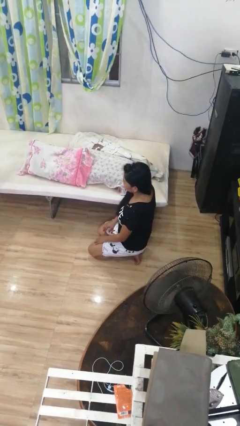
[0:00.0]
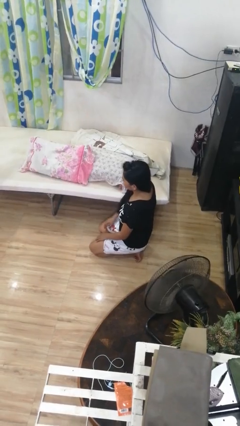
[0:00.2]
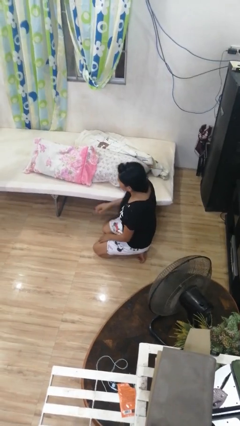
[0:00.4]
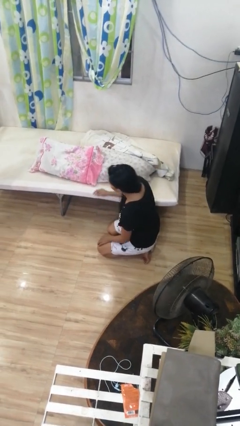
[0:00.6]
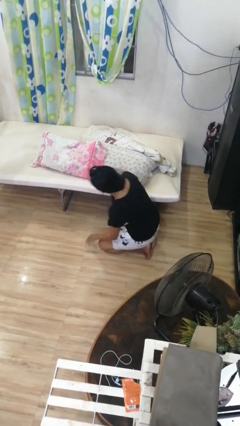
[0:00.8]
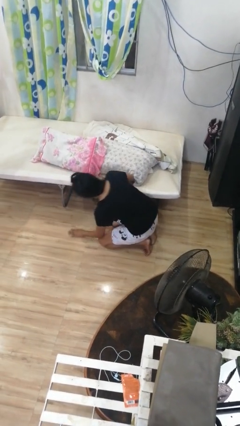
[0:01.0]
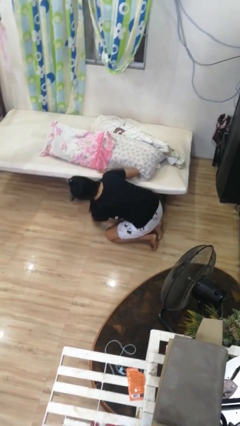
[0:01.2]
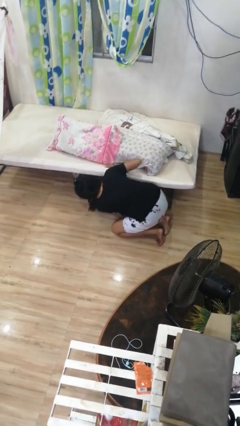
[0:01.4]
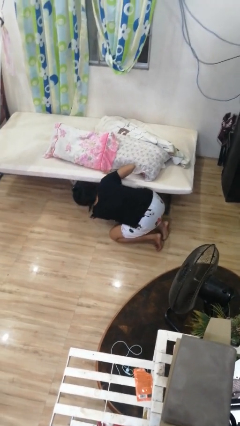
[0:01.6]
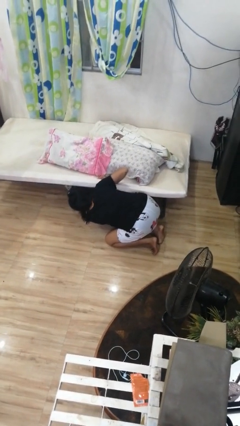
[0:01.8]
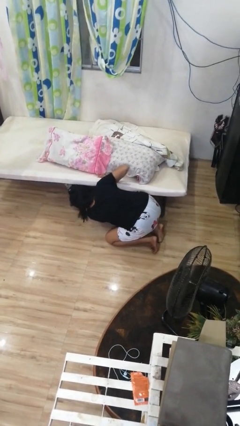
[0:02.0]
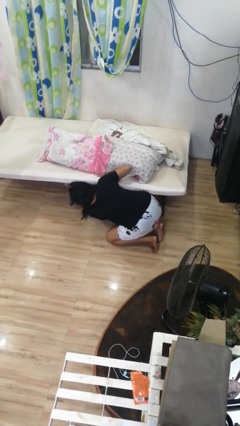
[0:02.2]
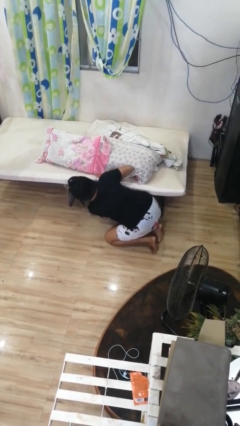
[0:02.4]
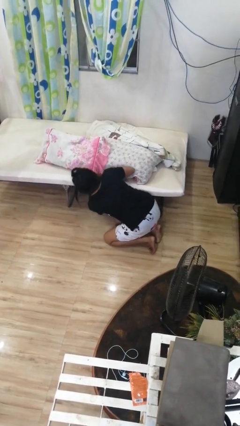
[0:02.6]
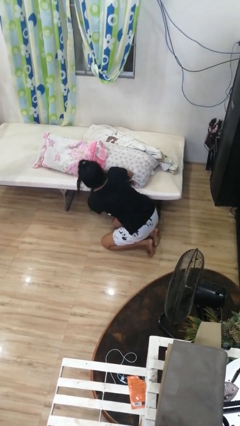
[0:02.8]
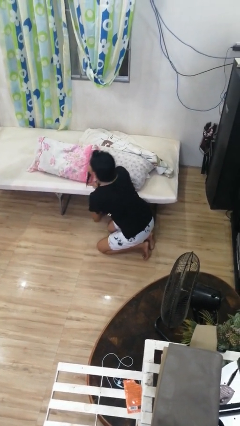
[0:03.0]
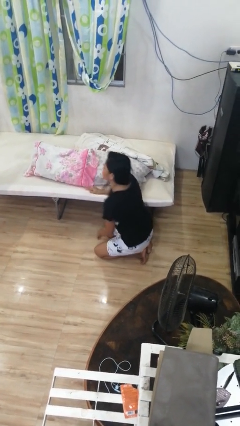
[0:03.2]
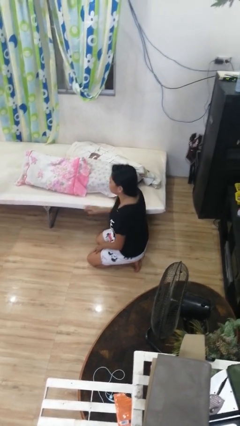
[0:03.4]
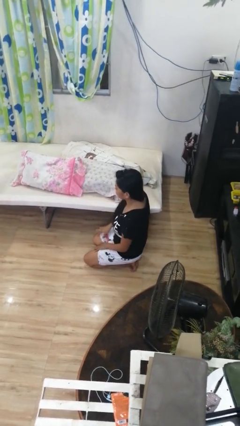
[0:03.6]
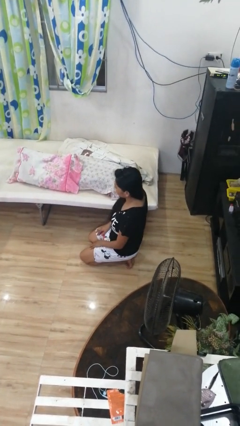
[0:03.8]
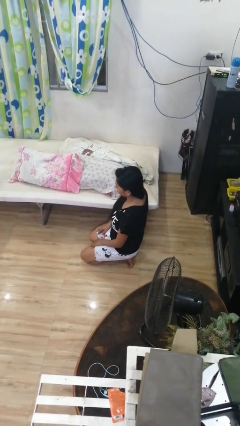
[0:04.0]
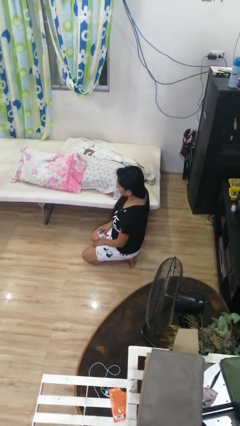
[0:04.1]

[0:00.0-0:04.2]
person searches under bed

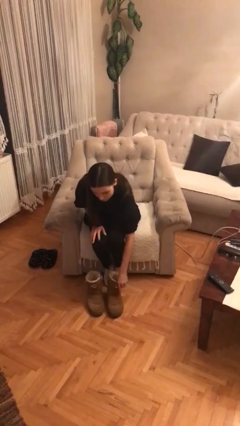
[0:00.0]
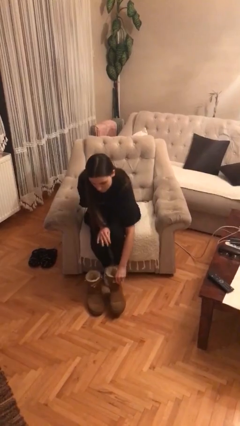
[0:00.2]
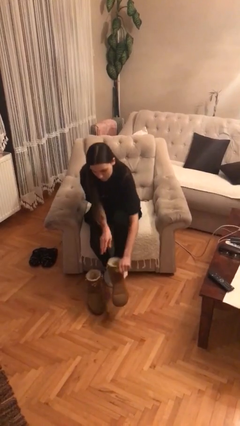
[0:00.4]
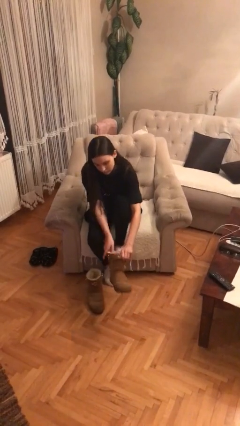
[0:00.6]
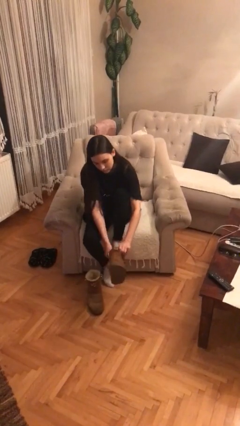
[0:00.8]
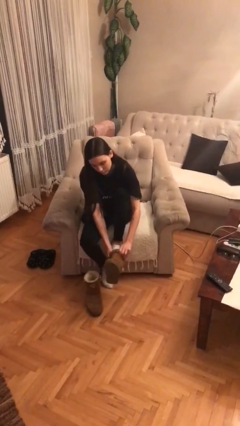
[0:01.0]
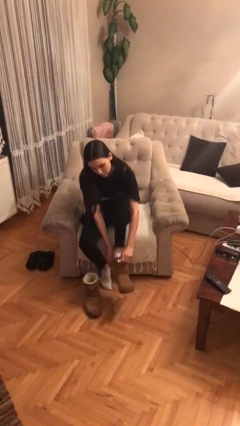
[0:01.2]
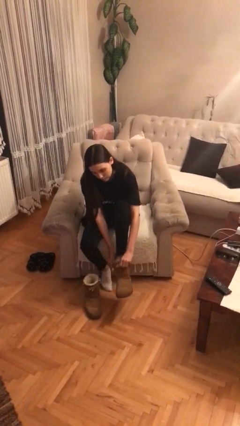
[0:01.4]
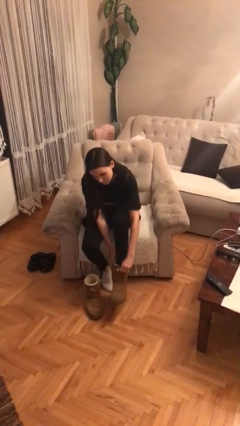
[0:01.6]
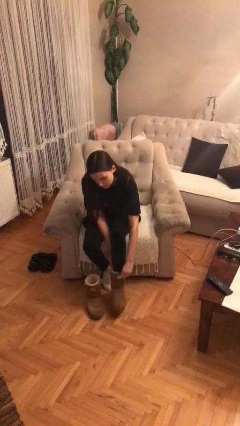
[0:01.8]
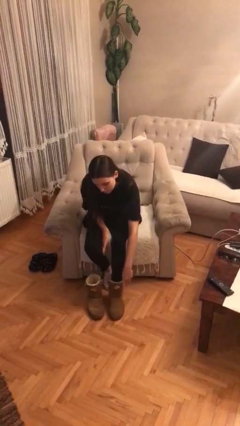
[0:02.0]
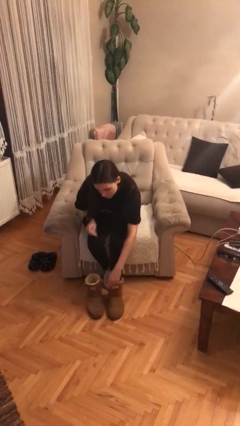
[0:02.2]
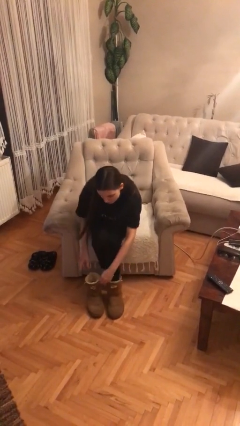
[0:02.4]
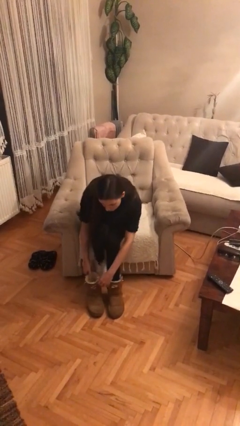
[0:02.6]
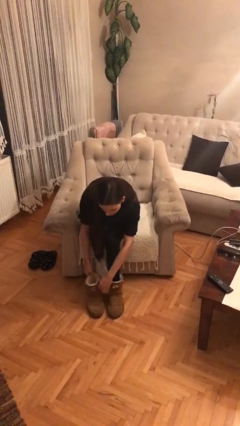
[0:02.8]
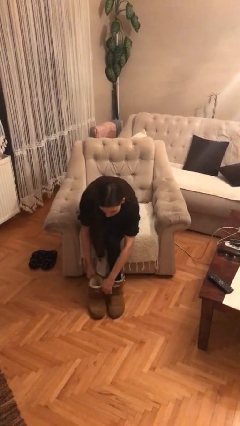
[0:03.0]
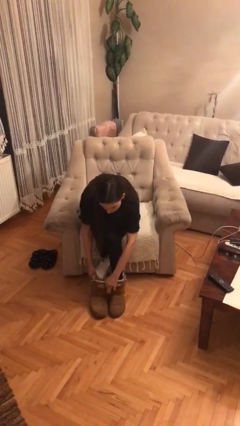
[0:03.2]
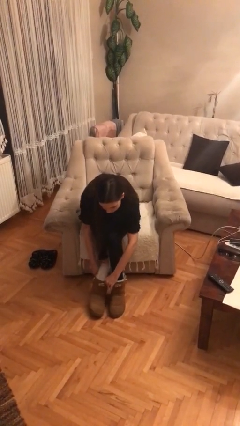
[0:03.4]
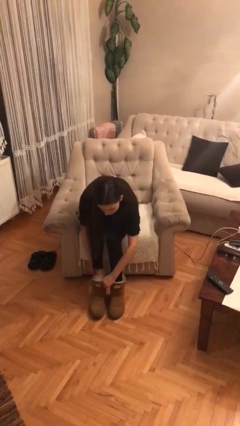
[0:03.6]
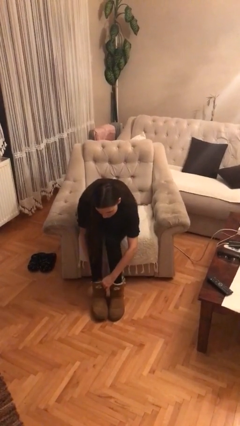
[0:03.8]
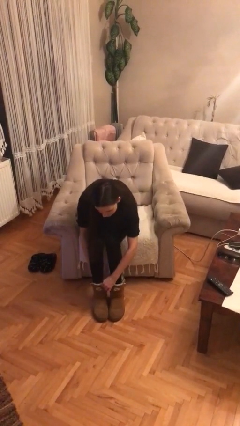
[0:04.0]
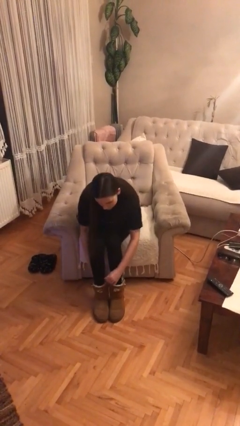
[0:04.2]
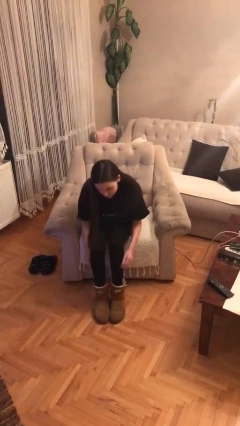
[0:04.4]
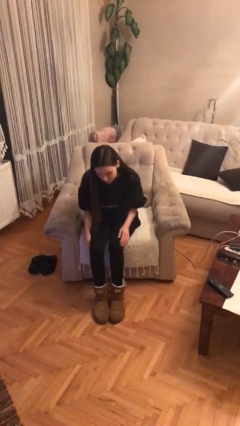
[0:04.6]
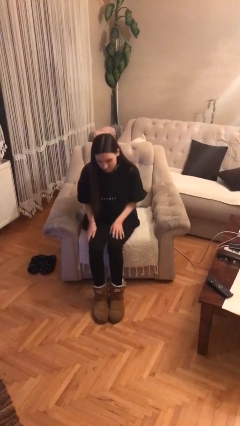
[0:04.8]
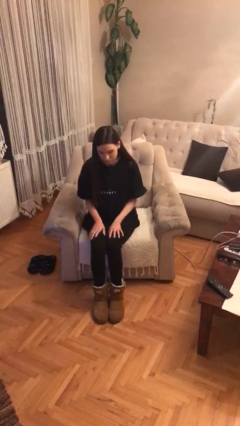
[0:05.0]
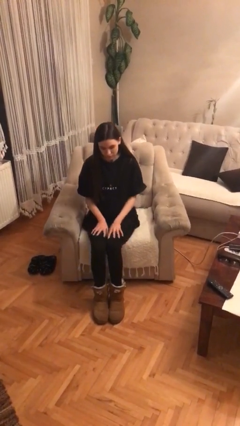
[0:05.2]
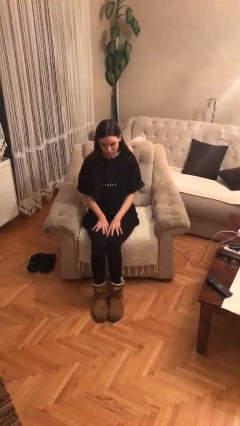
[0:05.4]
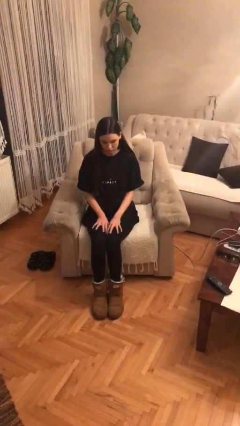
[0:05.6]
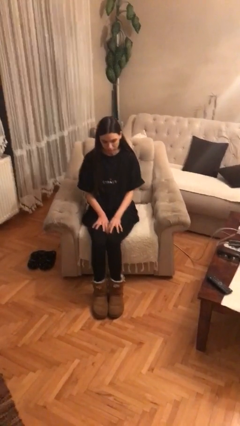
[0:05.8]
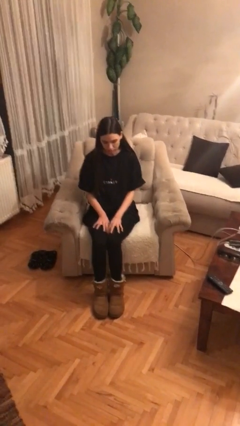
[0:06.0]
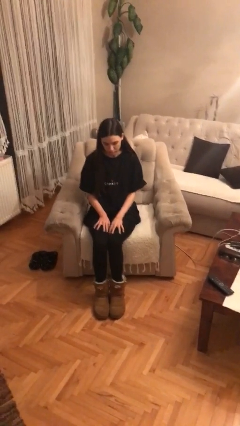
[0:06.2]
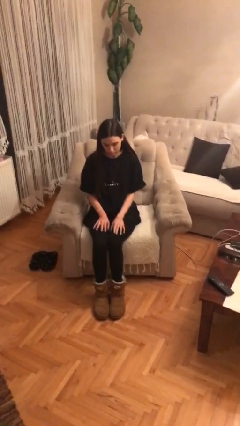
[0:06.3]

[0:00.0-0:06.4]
person puts on shoes

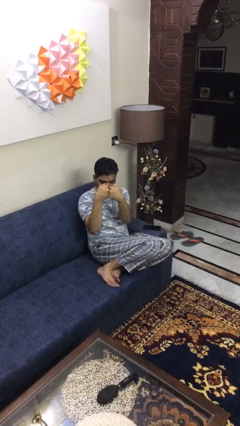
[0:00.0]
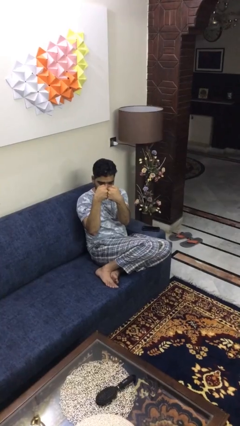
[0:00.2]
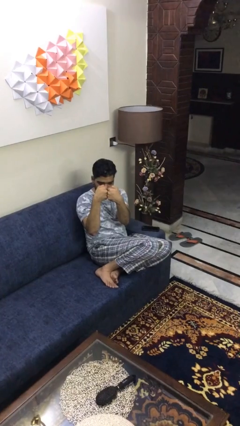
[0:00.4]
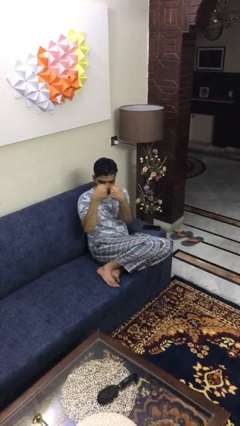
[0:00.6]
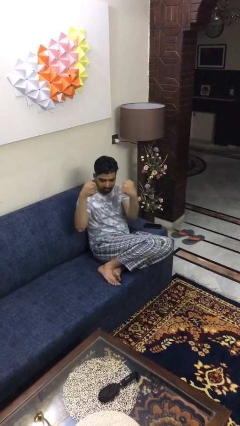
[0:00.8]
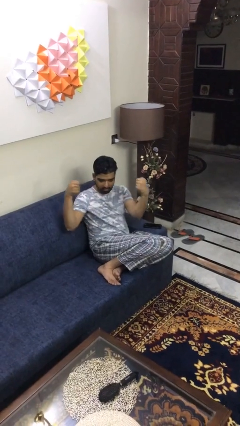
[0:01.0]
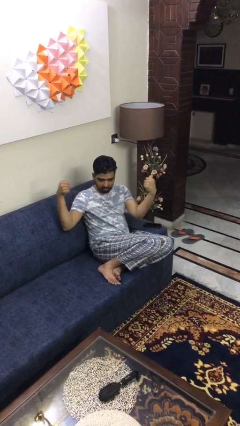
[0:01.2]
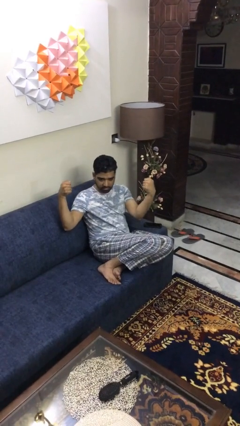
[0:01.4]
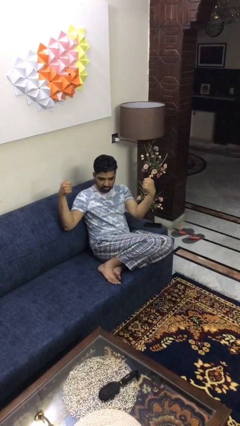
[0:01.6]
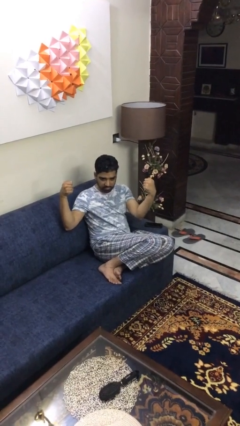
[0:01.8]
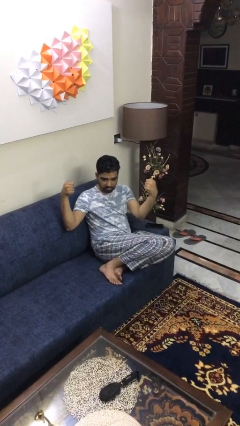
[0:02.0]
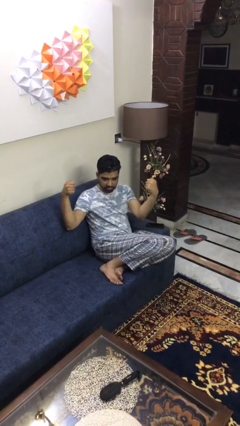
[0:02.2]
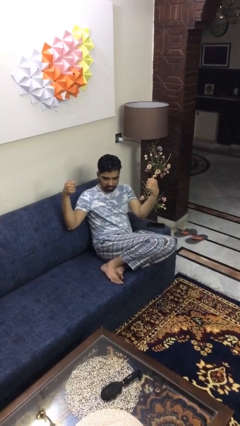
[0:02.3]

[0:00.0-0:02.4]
person gestures zoom in

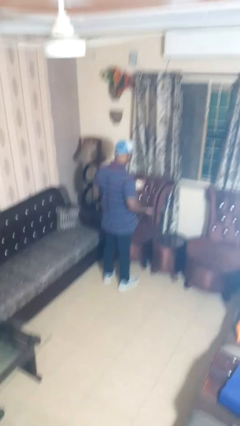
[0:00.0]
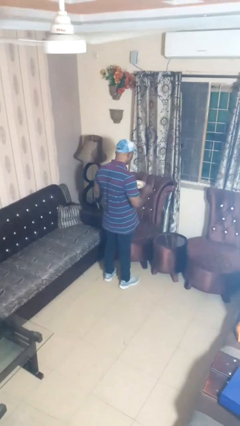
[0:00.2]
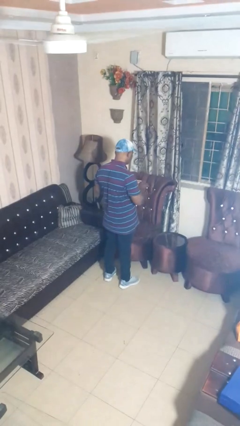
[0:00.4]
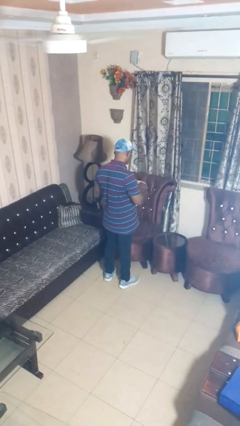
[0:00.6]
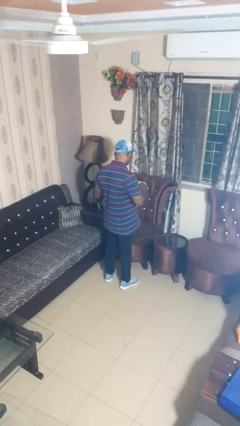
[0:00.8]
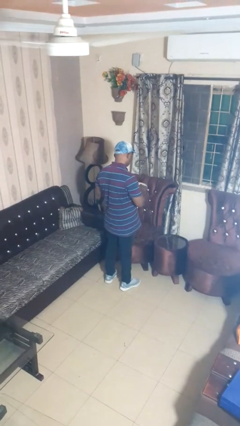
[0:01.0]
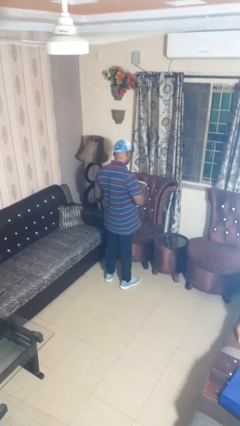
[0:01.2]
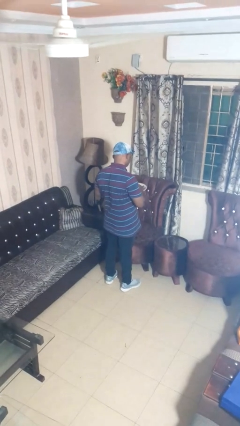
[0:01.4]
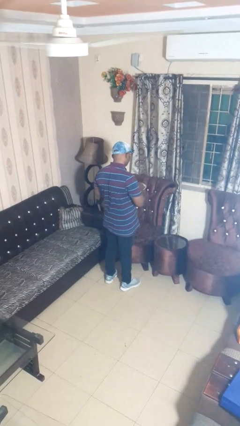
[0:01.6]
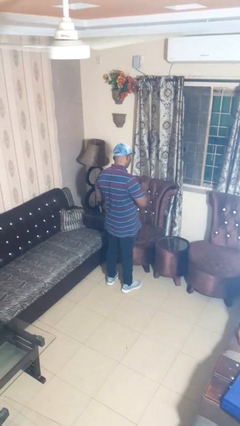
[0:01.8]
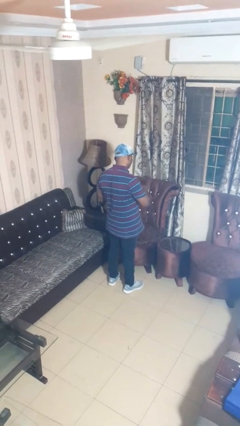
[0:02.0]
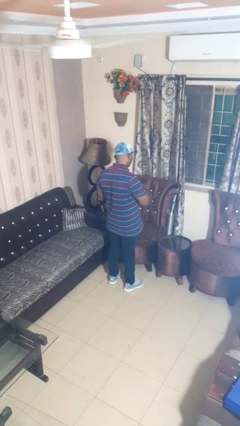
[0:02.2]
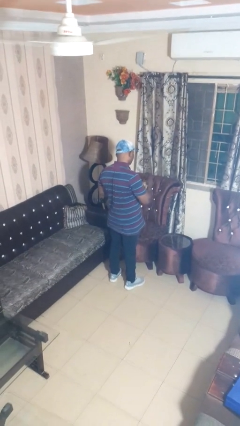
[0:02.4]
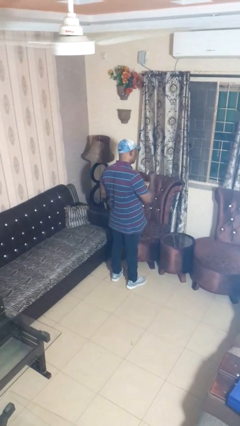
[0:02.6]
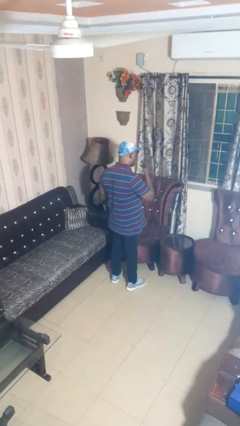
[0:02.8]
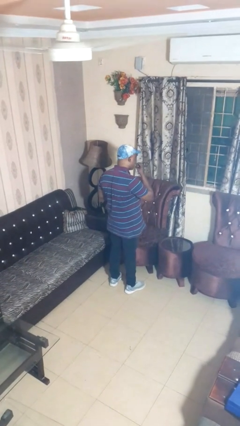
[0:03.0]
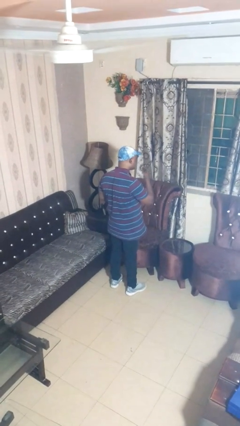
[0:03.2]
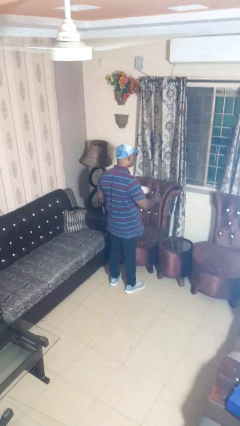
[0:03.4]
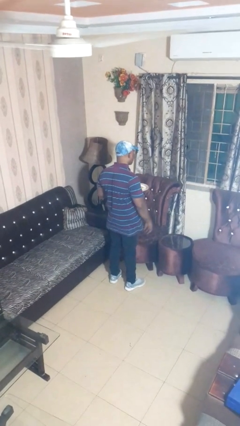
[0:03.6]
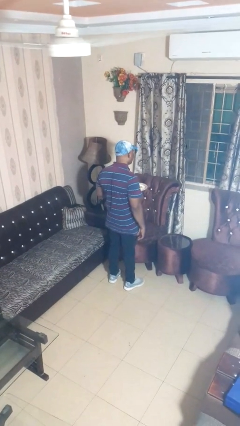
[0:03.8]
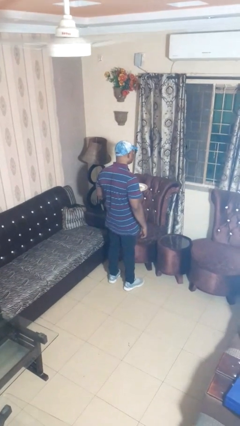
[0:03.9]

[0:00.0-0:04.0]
person eats with hands

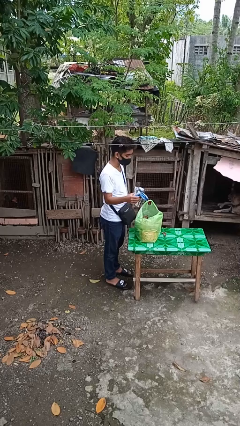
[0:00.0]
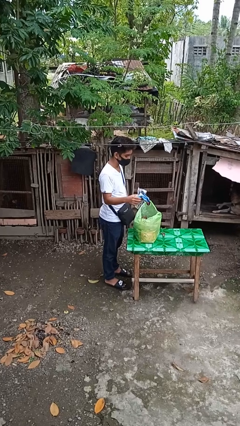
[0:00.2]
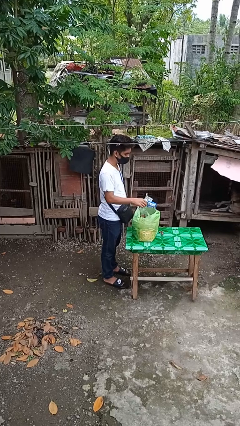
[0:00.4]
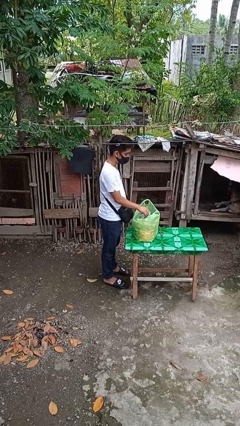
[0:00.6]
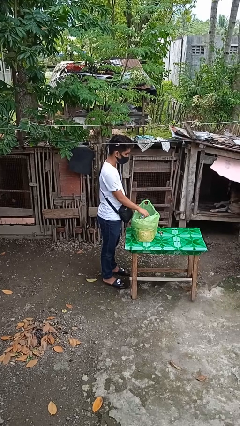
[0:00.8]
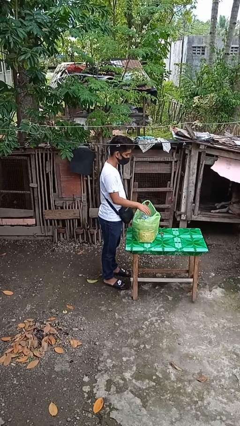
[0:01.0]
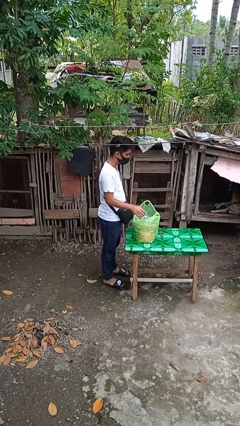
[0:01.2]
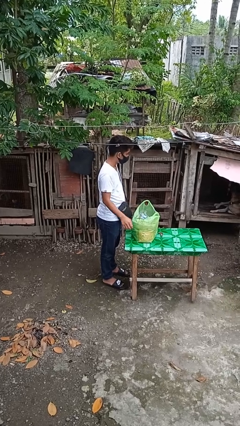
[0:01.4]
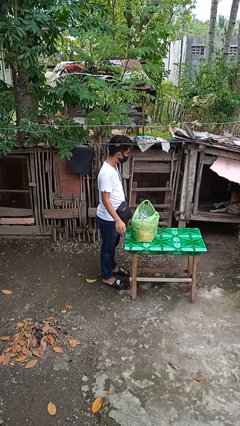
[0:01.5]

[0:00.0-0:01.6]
person puts object into bag
